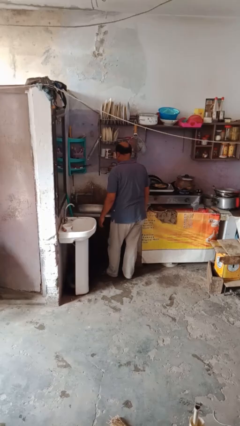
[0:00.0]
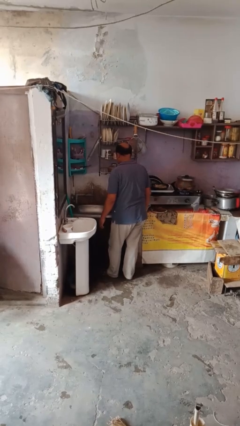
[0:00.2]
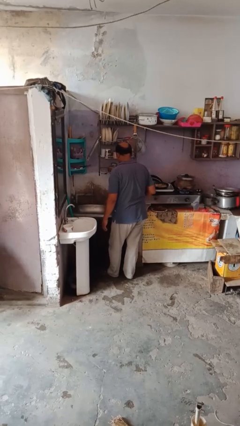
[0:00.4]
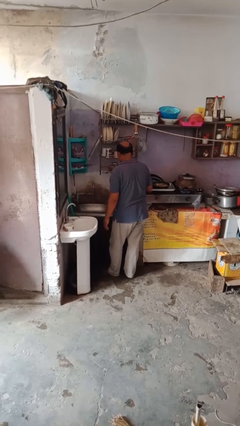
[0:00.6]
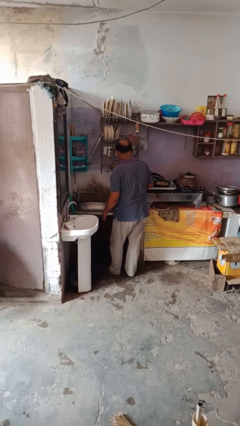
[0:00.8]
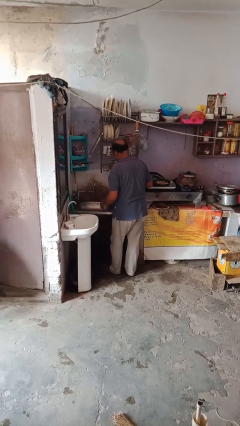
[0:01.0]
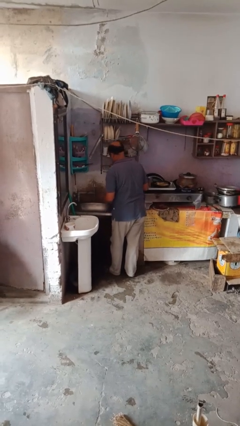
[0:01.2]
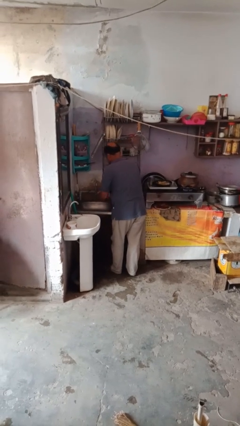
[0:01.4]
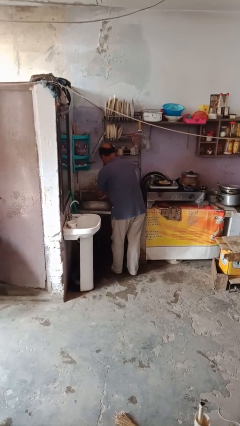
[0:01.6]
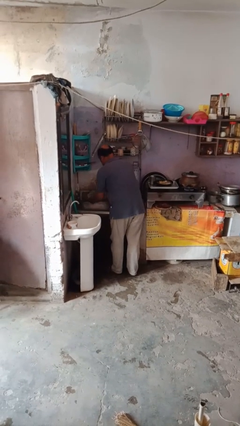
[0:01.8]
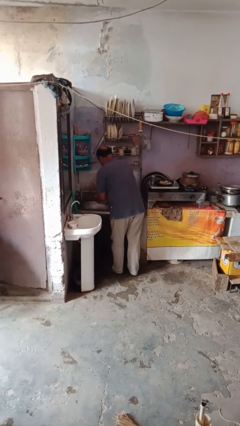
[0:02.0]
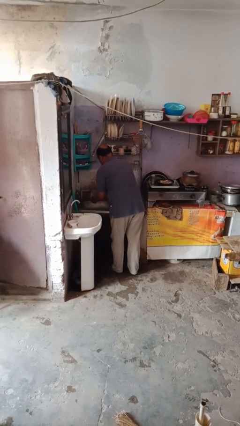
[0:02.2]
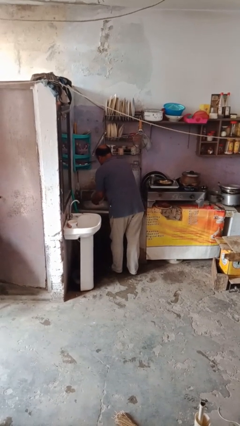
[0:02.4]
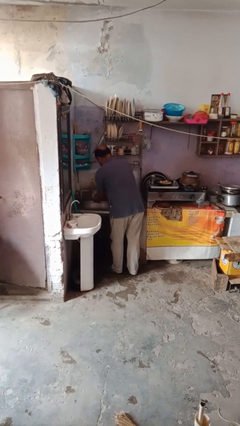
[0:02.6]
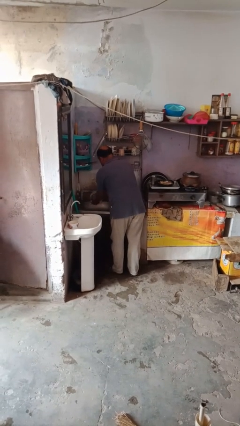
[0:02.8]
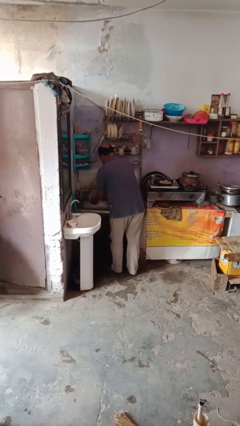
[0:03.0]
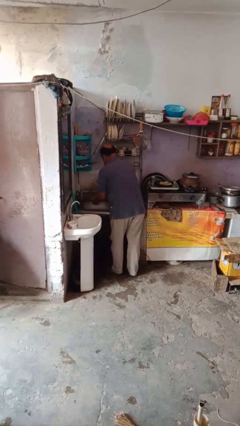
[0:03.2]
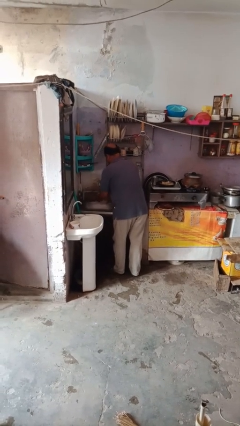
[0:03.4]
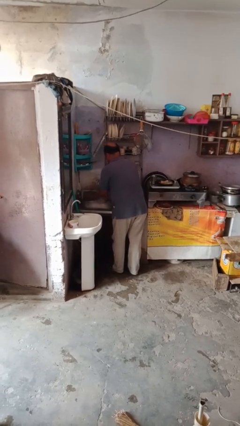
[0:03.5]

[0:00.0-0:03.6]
person washes dish

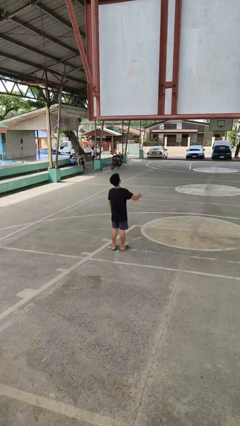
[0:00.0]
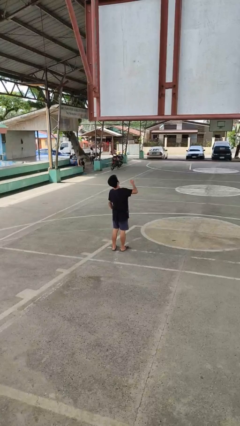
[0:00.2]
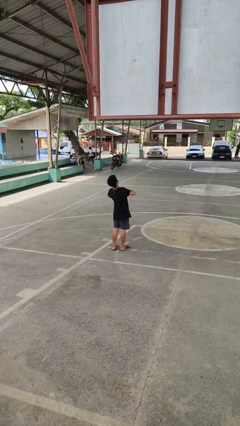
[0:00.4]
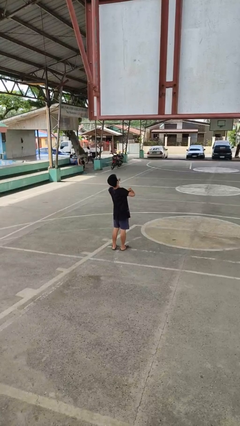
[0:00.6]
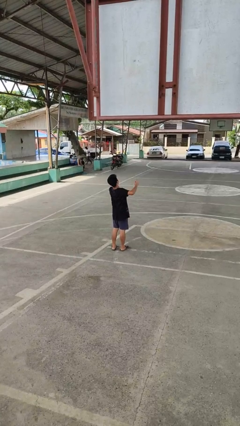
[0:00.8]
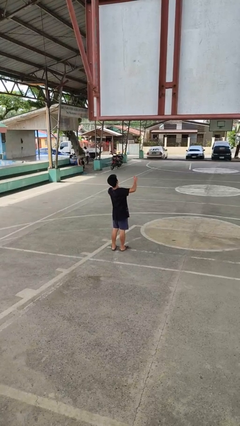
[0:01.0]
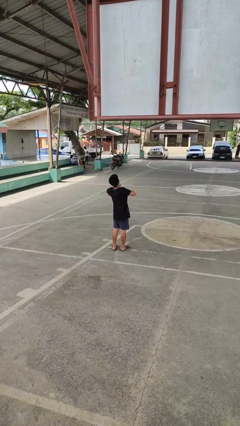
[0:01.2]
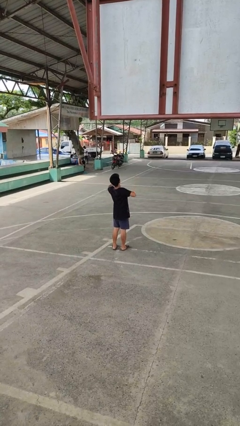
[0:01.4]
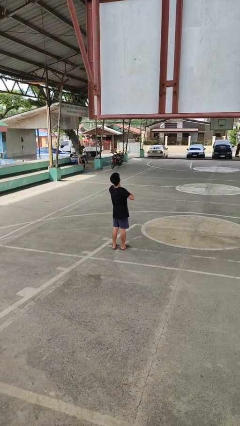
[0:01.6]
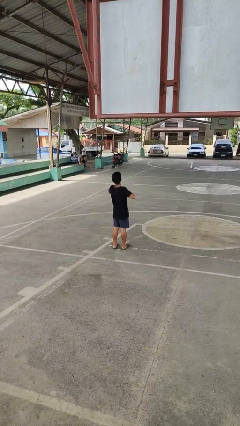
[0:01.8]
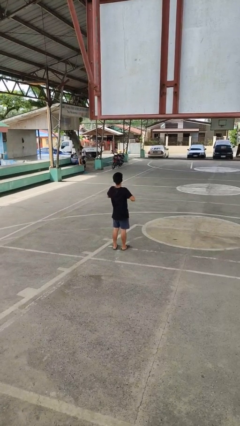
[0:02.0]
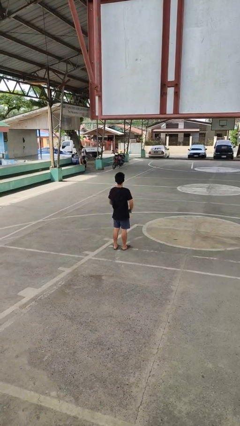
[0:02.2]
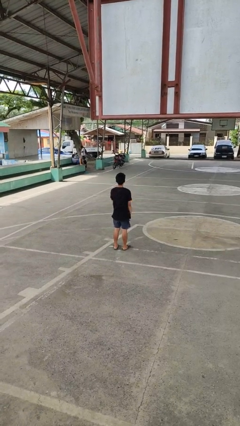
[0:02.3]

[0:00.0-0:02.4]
person drums on chest

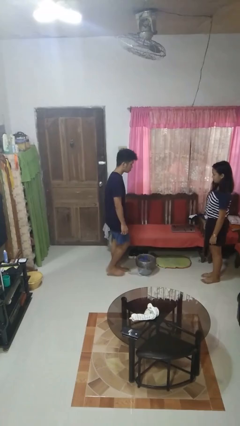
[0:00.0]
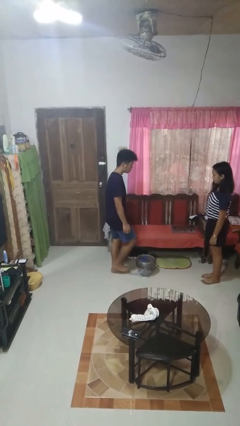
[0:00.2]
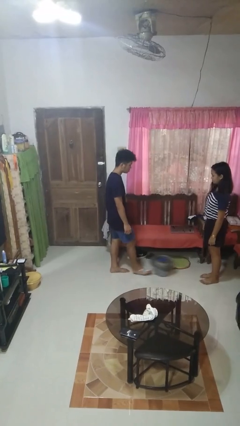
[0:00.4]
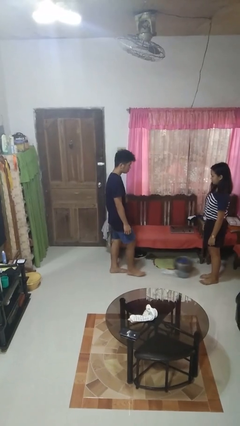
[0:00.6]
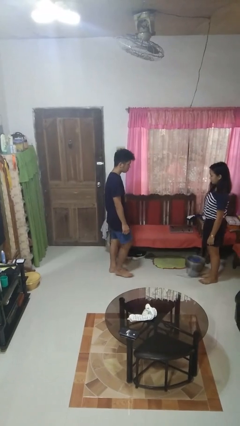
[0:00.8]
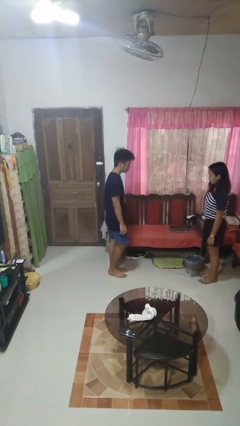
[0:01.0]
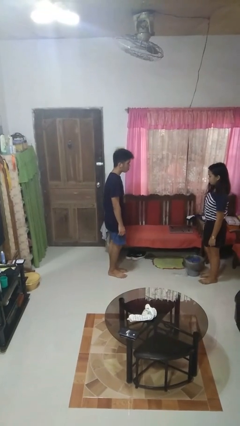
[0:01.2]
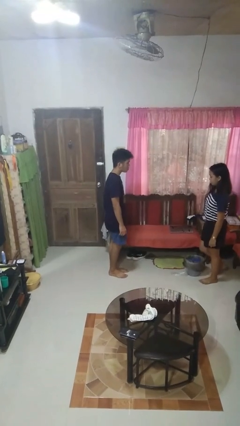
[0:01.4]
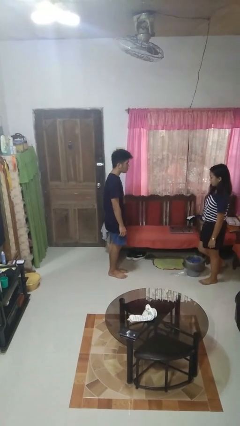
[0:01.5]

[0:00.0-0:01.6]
person kicks object to person

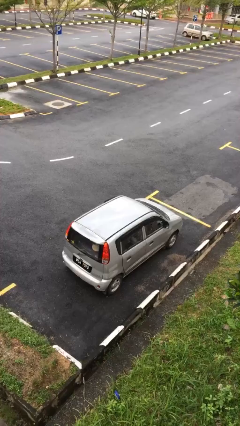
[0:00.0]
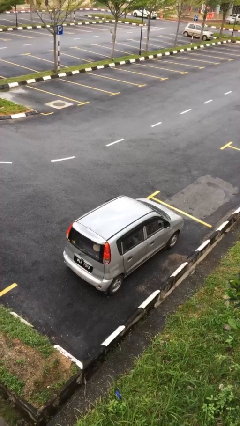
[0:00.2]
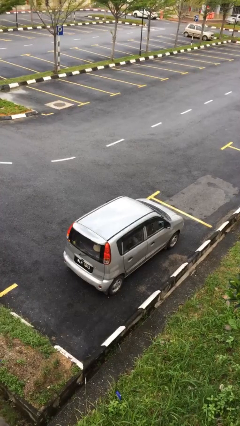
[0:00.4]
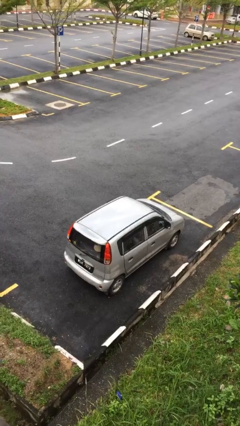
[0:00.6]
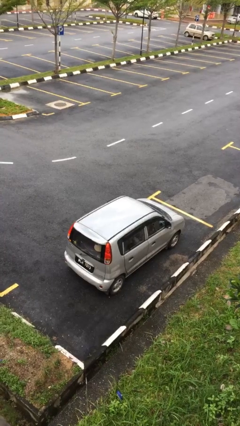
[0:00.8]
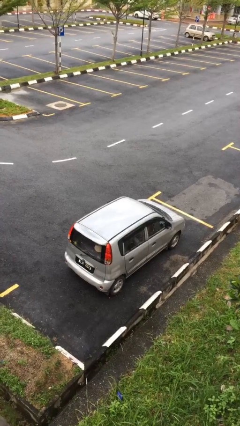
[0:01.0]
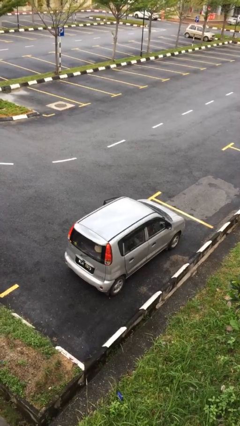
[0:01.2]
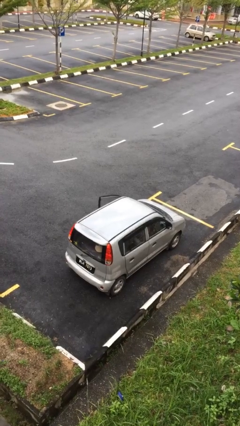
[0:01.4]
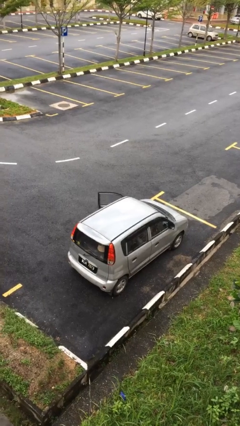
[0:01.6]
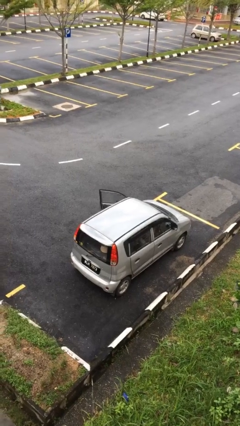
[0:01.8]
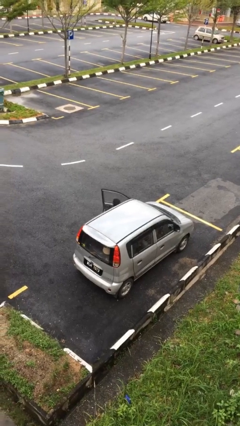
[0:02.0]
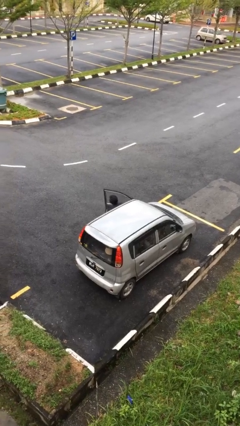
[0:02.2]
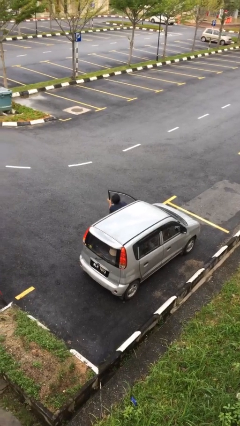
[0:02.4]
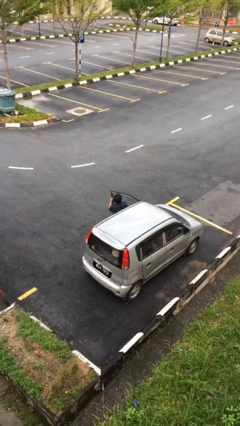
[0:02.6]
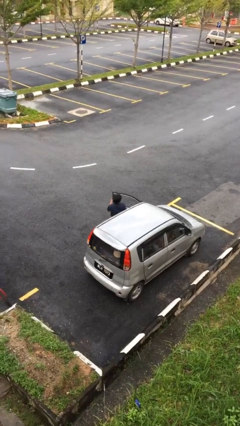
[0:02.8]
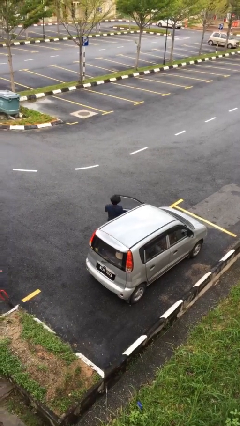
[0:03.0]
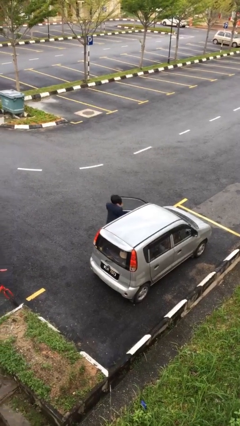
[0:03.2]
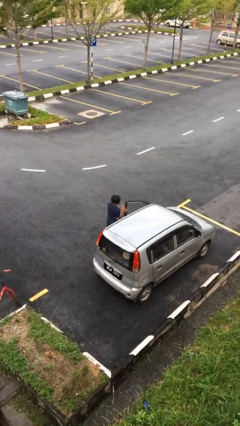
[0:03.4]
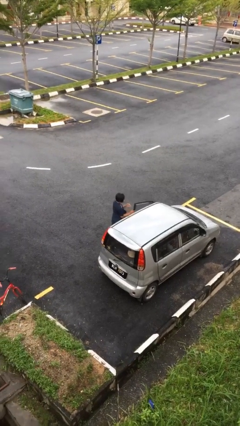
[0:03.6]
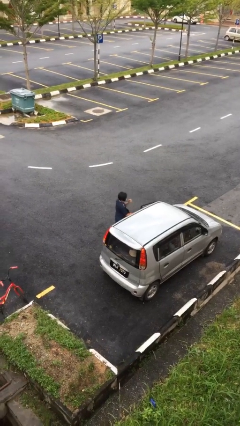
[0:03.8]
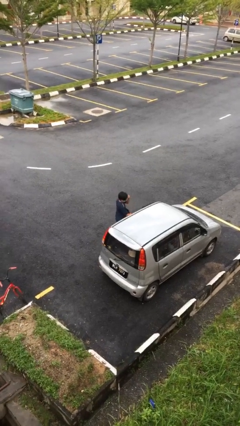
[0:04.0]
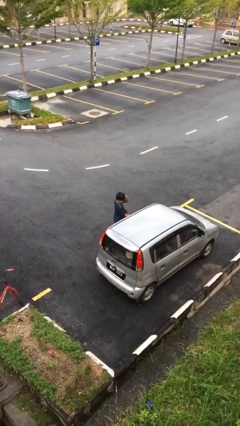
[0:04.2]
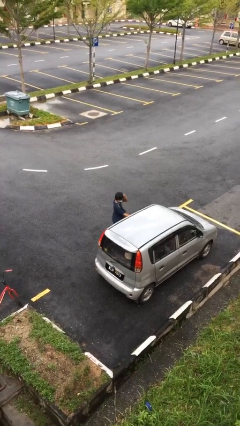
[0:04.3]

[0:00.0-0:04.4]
person exits car

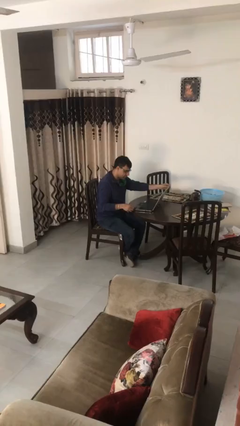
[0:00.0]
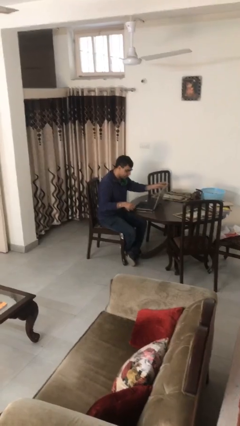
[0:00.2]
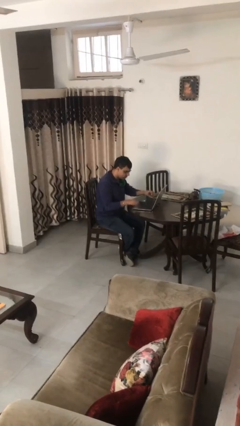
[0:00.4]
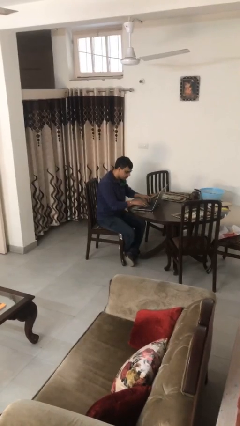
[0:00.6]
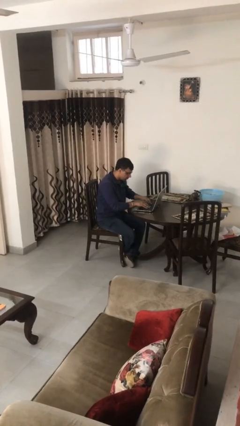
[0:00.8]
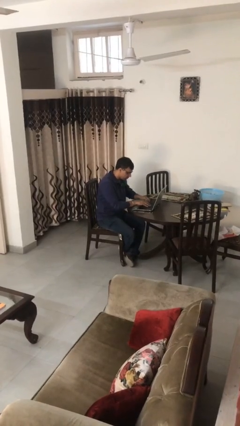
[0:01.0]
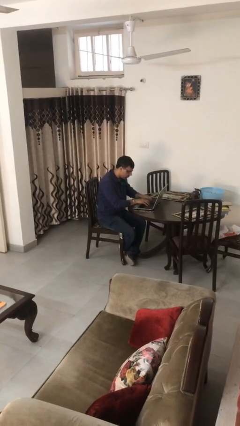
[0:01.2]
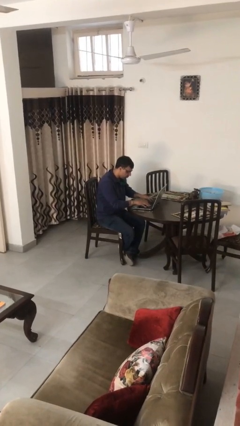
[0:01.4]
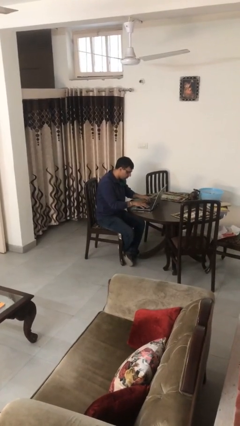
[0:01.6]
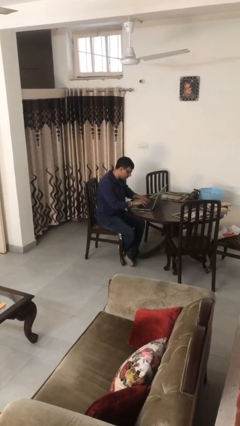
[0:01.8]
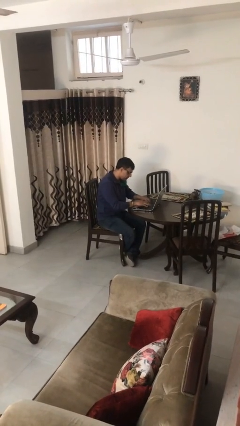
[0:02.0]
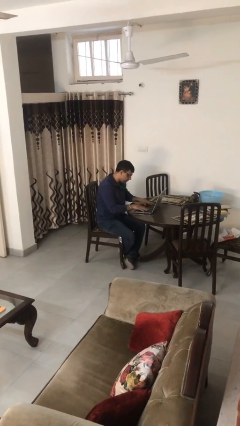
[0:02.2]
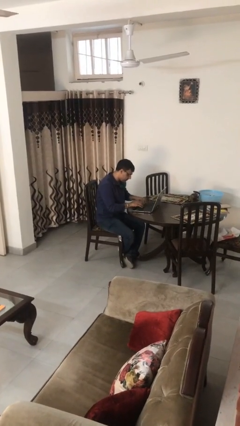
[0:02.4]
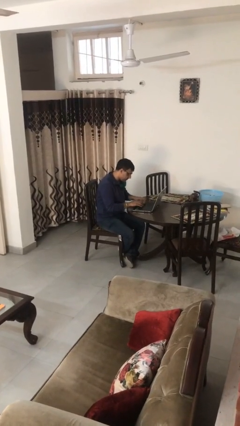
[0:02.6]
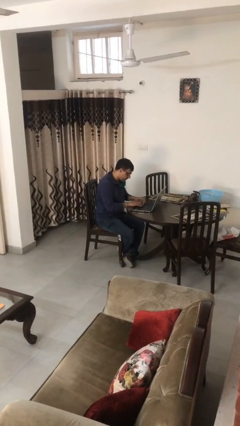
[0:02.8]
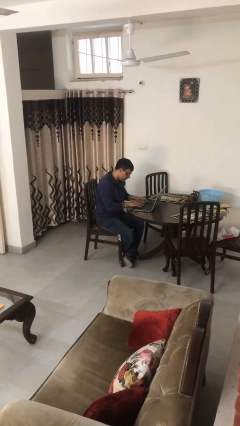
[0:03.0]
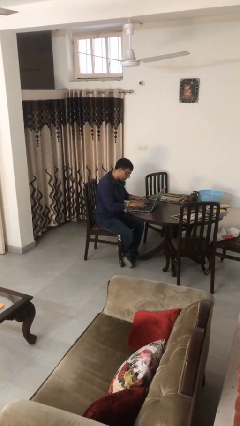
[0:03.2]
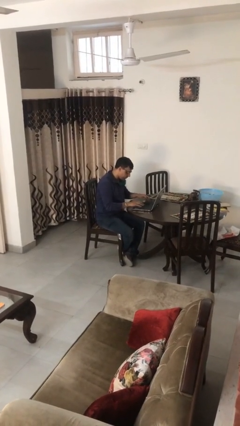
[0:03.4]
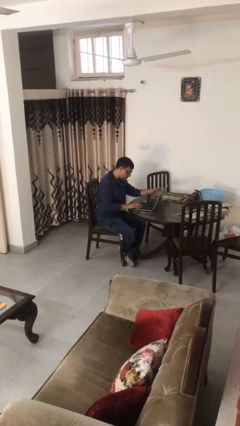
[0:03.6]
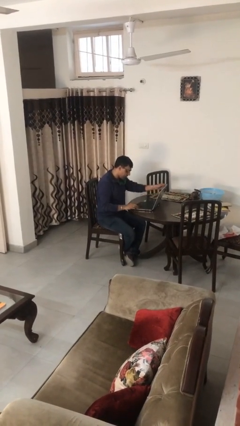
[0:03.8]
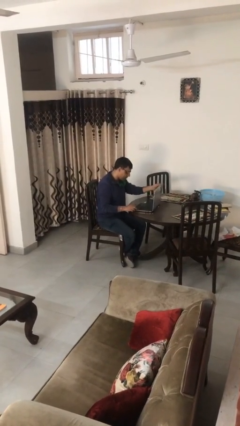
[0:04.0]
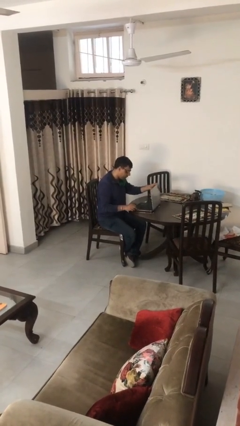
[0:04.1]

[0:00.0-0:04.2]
person interacts with laptop

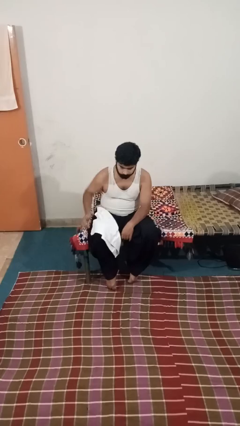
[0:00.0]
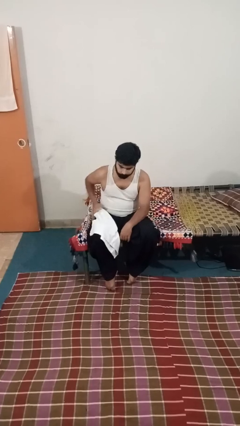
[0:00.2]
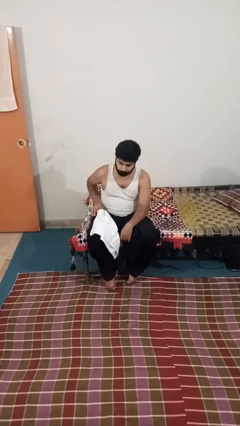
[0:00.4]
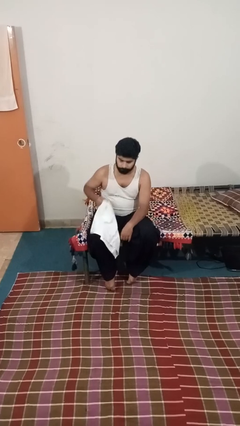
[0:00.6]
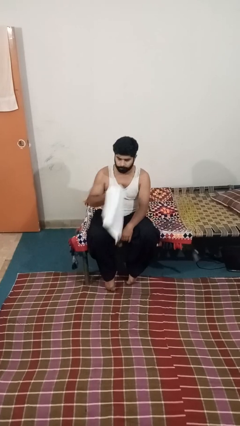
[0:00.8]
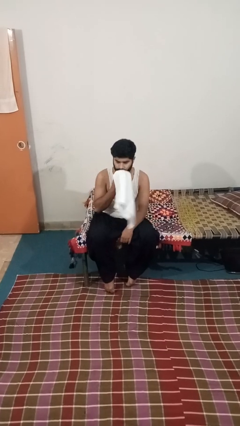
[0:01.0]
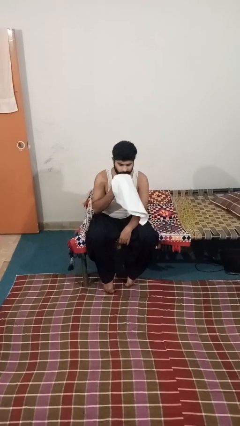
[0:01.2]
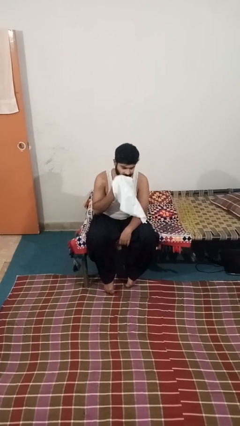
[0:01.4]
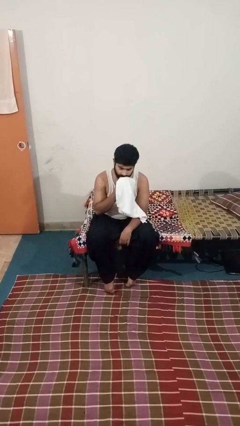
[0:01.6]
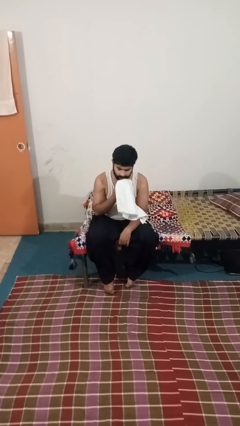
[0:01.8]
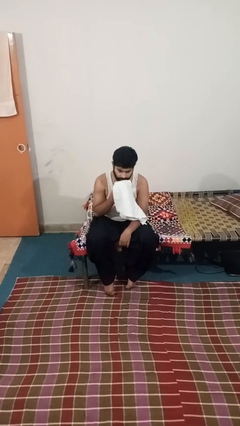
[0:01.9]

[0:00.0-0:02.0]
person wipes mouth with napkin
